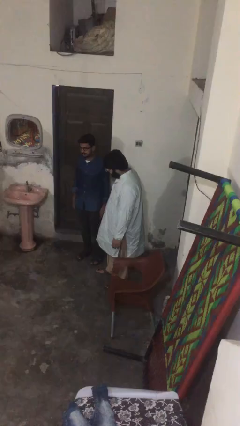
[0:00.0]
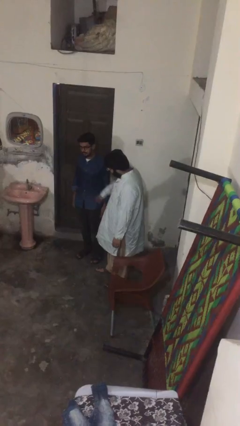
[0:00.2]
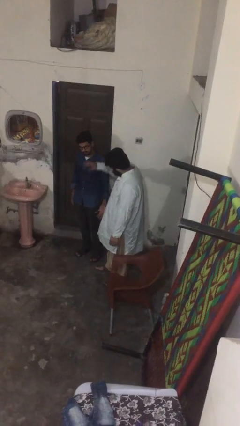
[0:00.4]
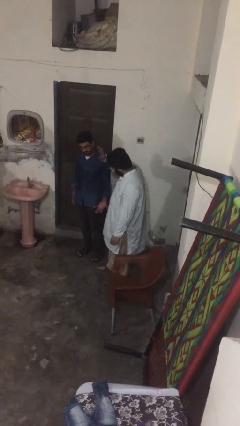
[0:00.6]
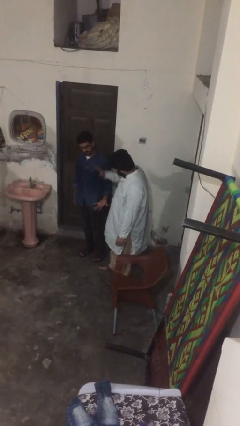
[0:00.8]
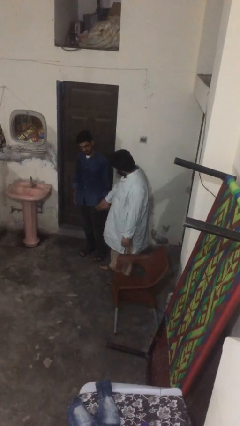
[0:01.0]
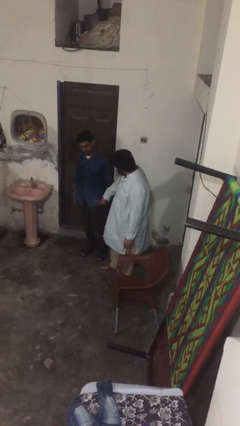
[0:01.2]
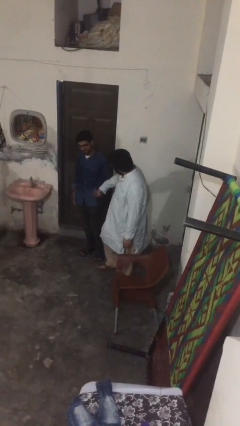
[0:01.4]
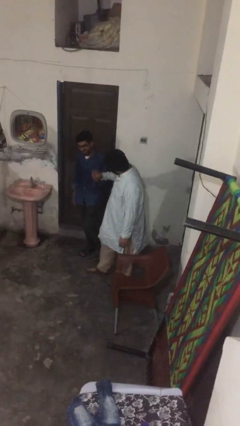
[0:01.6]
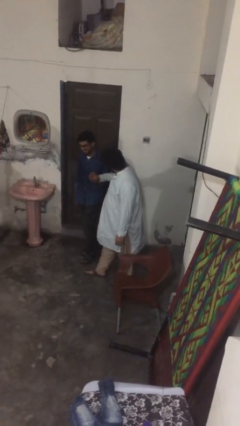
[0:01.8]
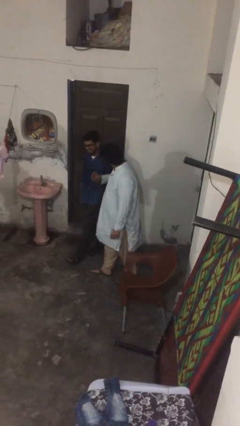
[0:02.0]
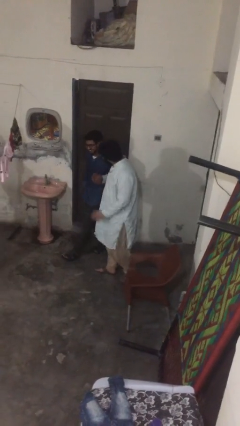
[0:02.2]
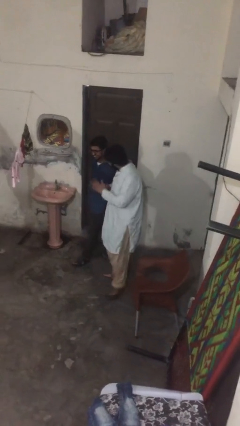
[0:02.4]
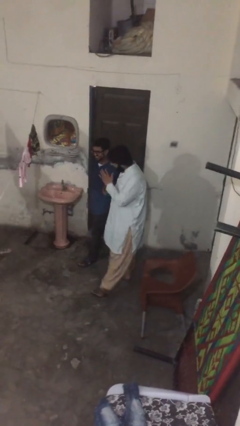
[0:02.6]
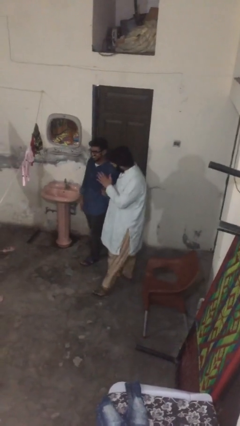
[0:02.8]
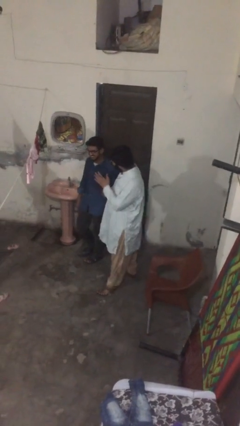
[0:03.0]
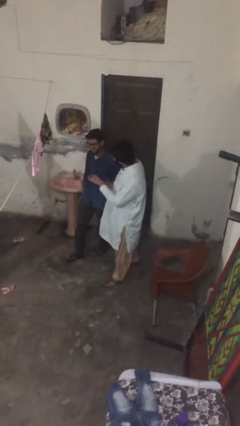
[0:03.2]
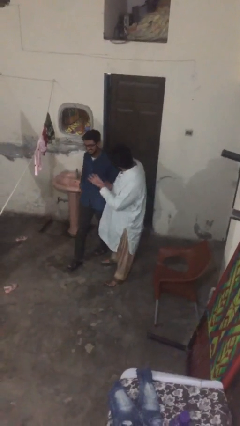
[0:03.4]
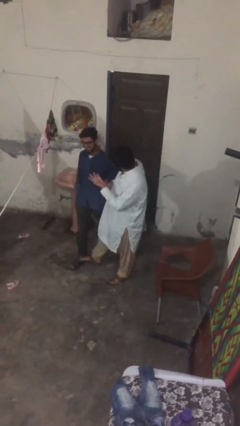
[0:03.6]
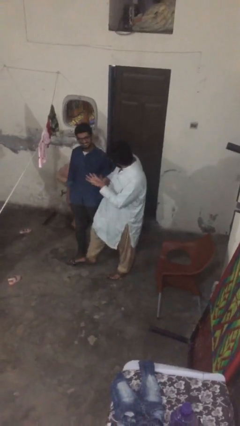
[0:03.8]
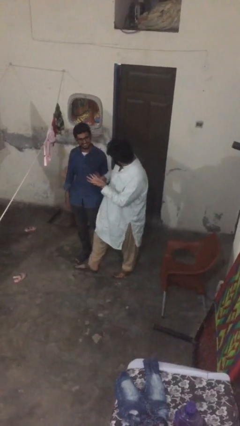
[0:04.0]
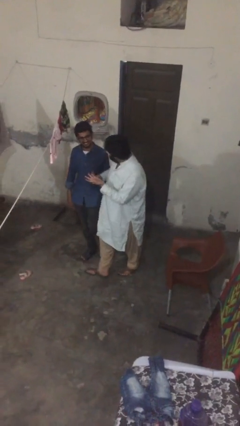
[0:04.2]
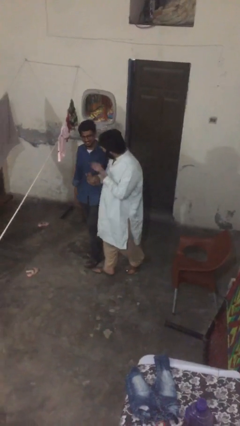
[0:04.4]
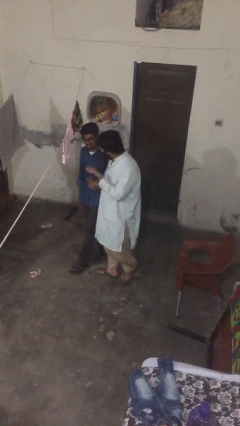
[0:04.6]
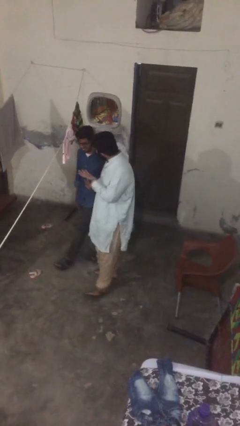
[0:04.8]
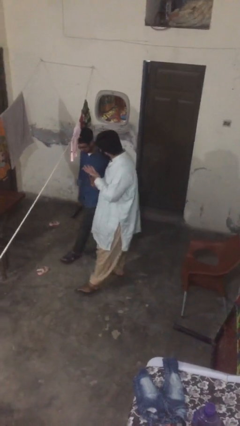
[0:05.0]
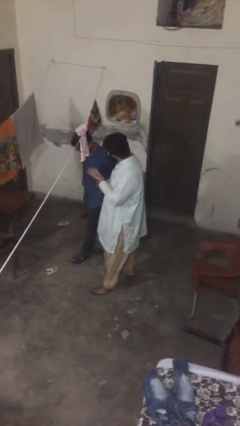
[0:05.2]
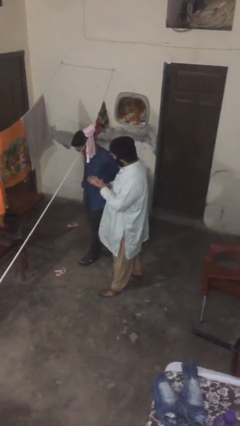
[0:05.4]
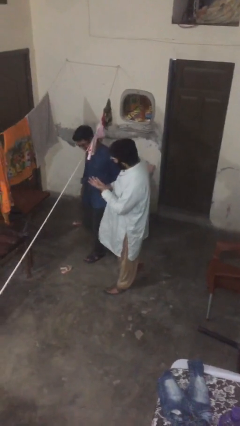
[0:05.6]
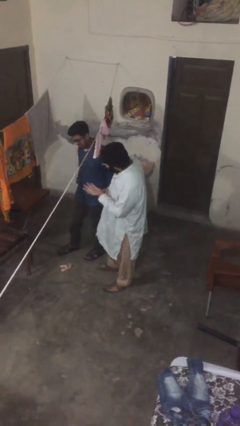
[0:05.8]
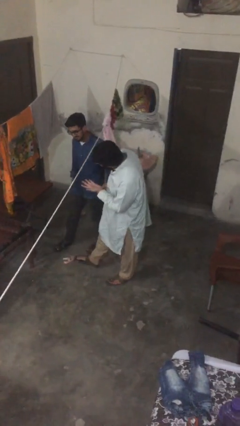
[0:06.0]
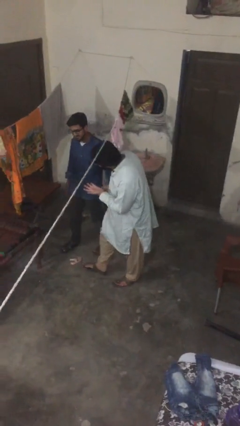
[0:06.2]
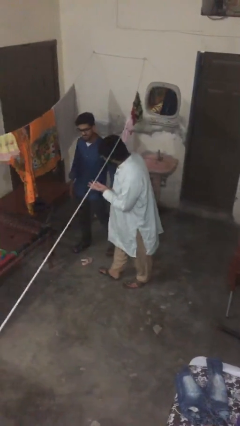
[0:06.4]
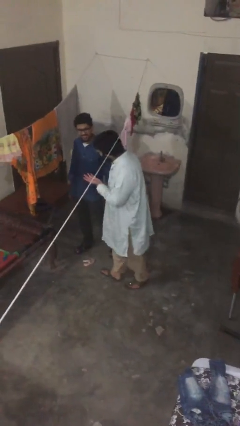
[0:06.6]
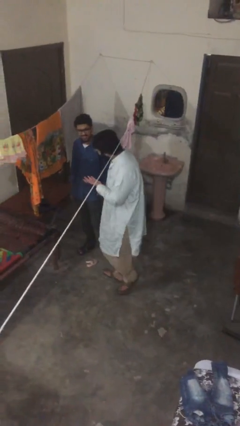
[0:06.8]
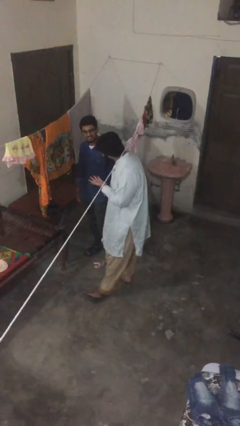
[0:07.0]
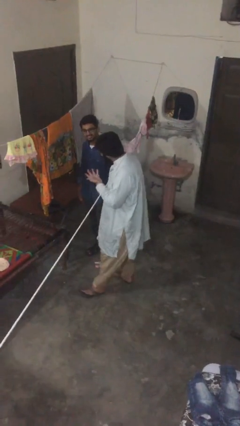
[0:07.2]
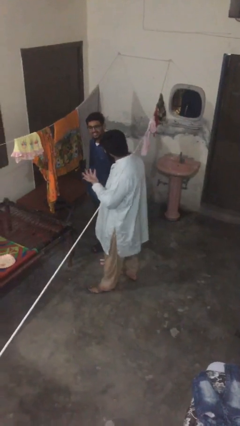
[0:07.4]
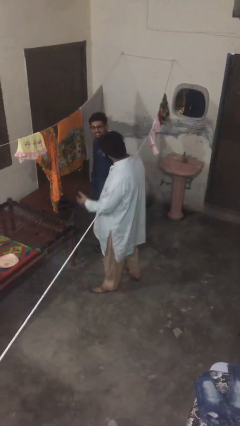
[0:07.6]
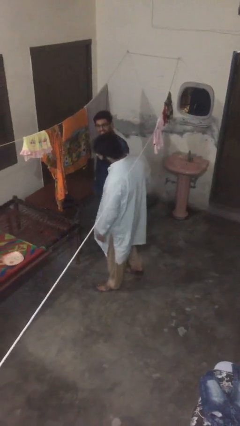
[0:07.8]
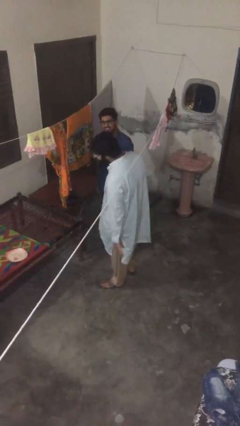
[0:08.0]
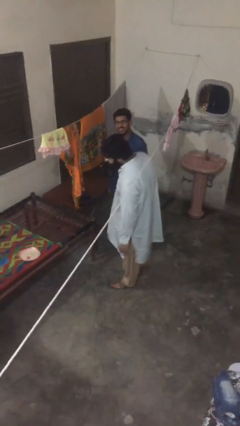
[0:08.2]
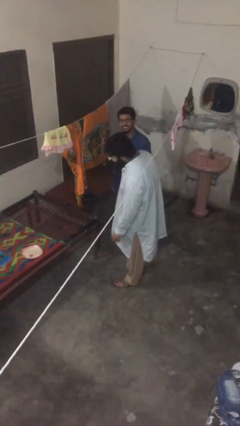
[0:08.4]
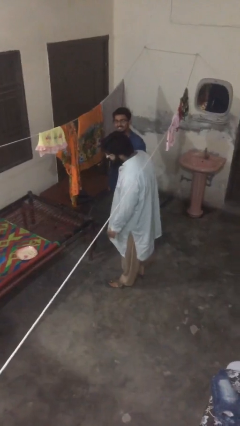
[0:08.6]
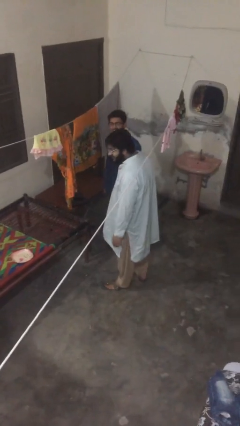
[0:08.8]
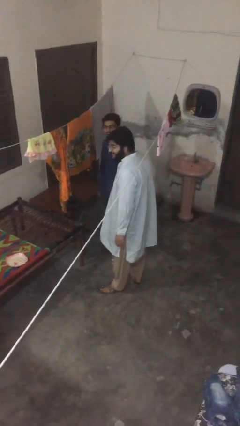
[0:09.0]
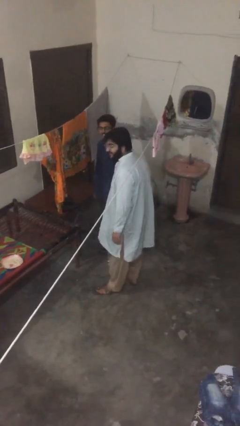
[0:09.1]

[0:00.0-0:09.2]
person holds hand

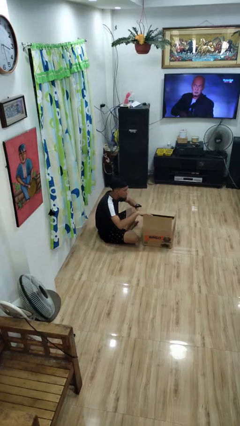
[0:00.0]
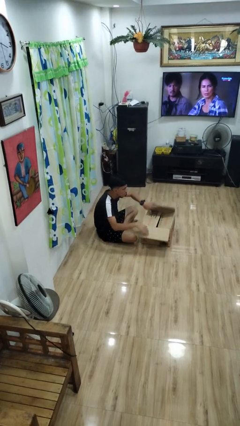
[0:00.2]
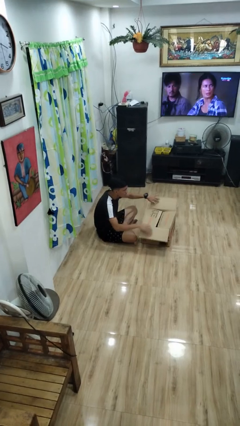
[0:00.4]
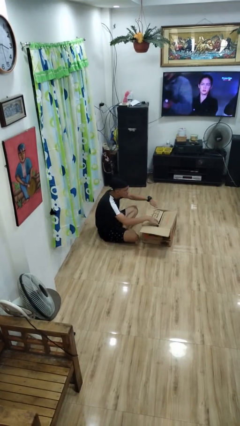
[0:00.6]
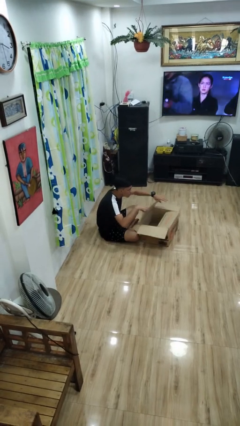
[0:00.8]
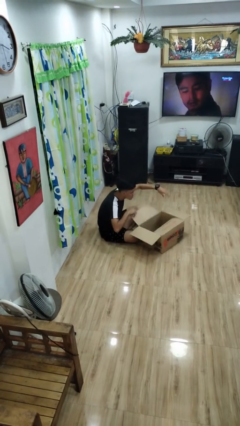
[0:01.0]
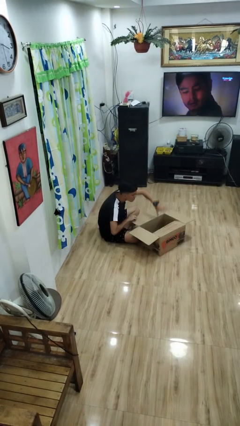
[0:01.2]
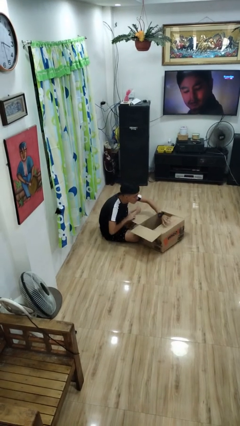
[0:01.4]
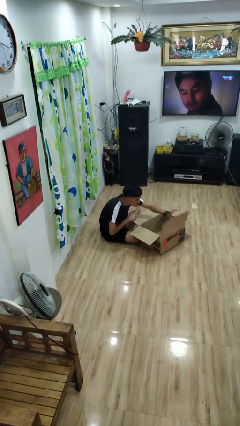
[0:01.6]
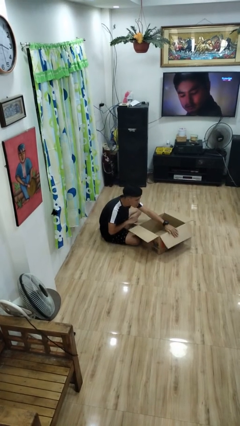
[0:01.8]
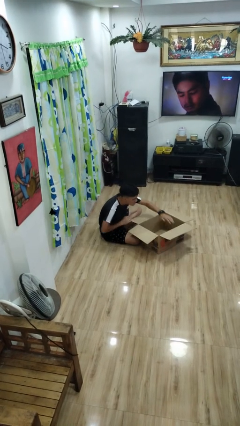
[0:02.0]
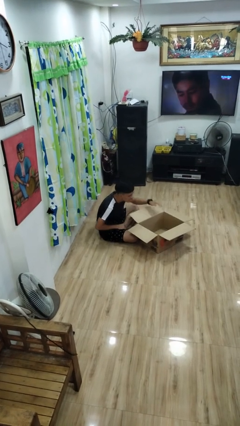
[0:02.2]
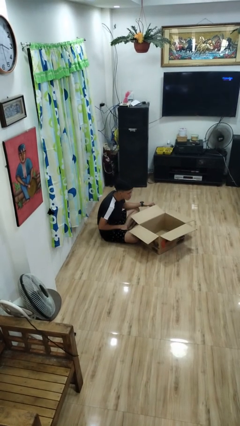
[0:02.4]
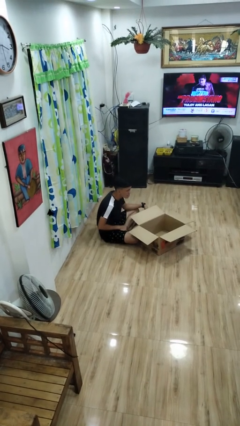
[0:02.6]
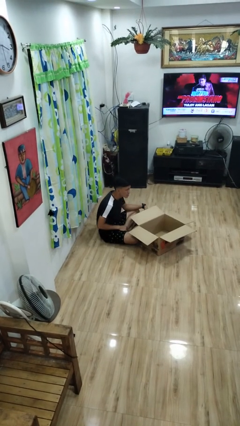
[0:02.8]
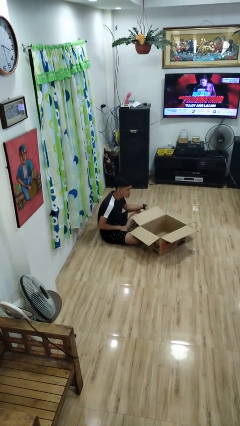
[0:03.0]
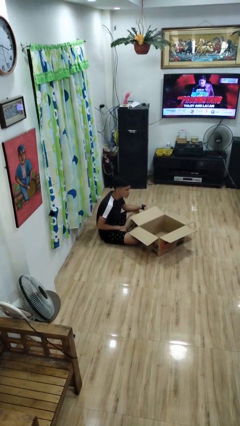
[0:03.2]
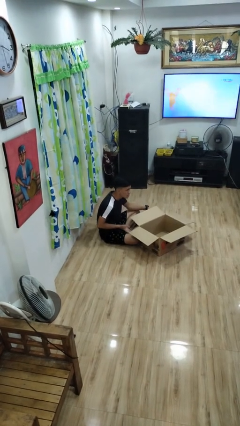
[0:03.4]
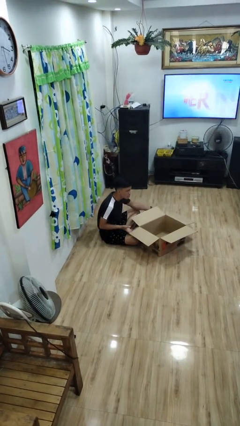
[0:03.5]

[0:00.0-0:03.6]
person opens box

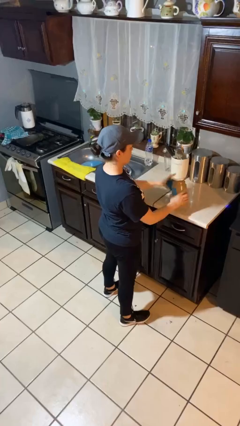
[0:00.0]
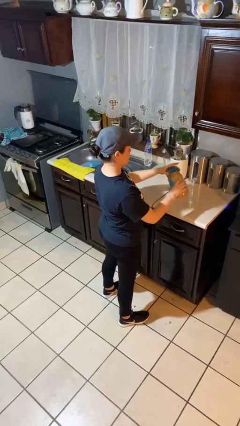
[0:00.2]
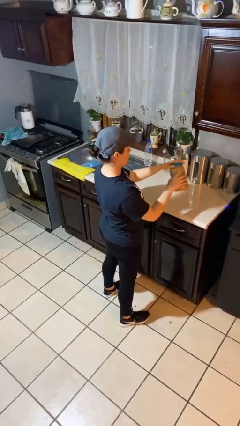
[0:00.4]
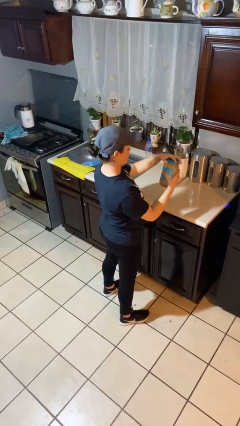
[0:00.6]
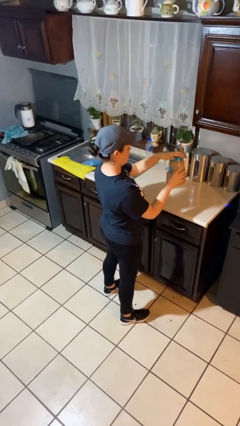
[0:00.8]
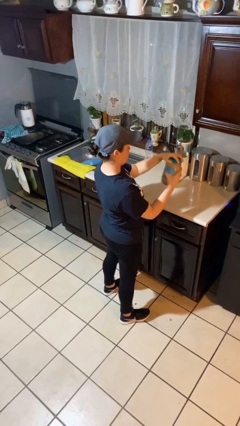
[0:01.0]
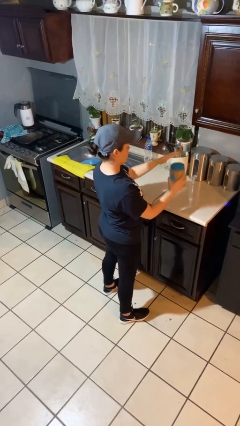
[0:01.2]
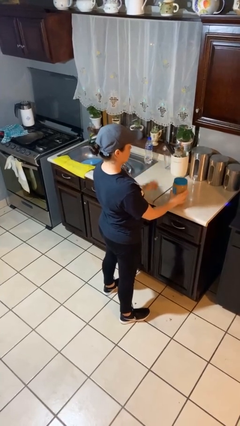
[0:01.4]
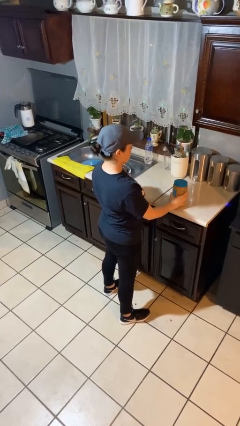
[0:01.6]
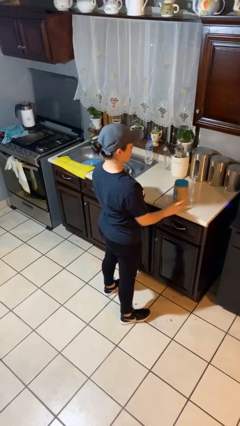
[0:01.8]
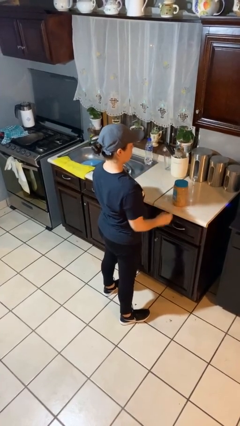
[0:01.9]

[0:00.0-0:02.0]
person closes jar

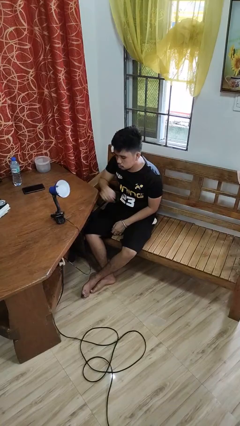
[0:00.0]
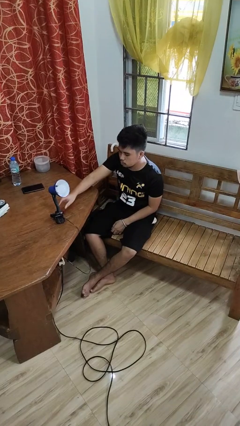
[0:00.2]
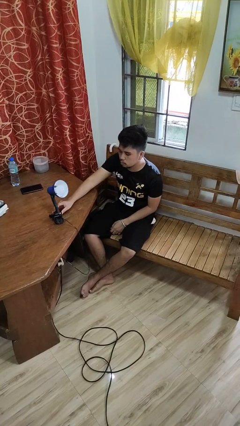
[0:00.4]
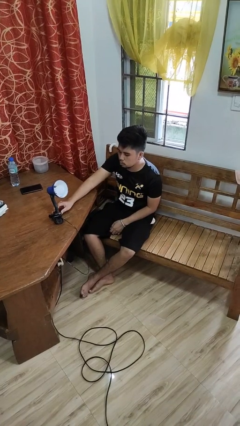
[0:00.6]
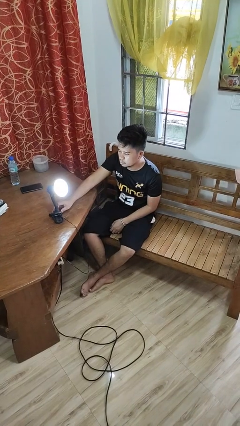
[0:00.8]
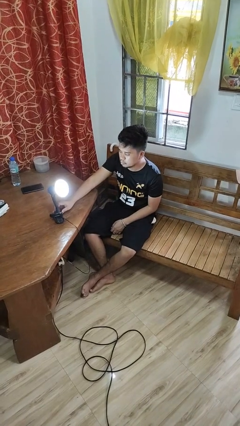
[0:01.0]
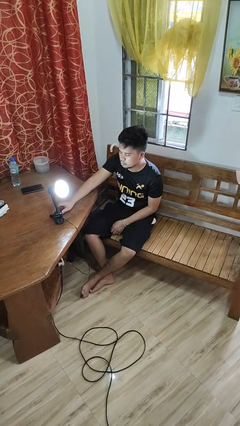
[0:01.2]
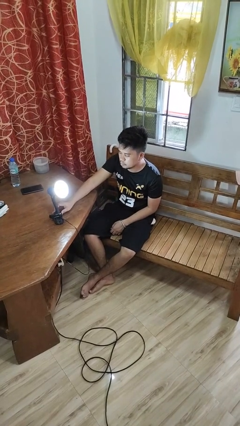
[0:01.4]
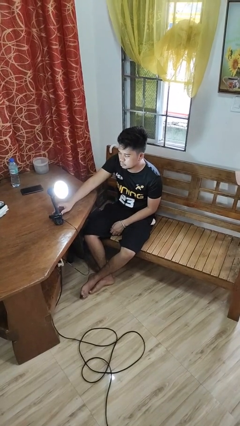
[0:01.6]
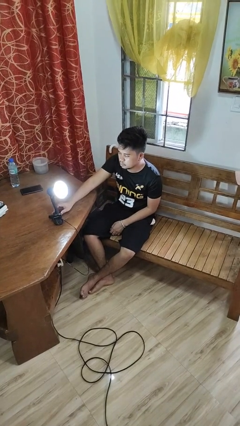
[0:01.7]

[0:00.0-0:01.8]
person turns on lamp

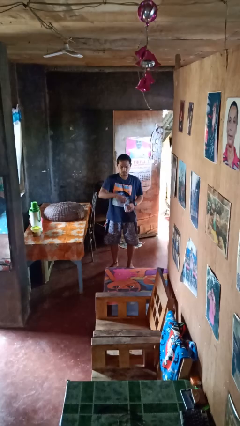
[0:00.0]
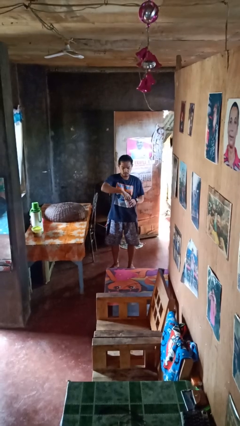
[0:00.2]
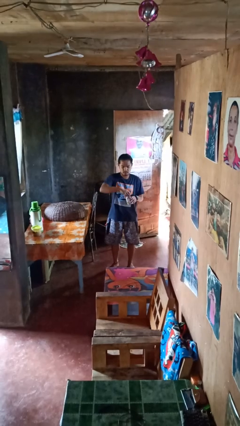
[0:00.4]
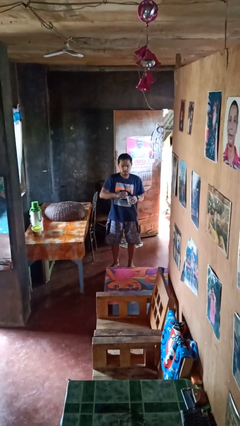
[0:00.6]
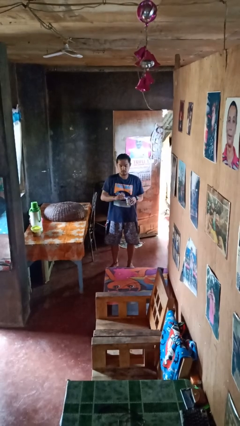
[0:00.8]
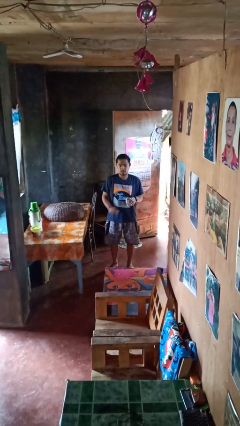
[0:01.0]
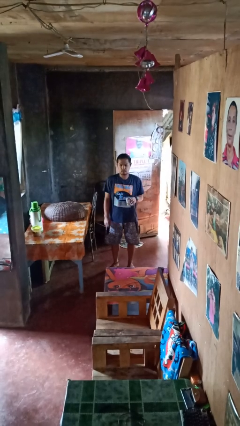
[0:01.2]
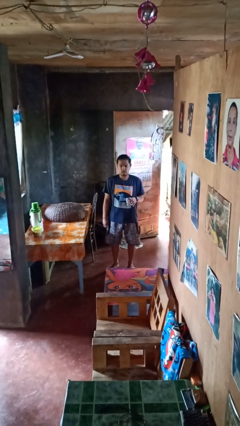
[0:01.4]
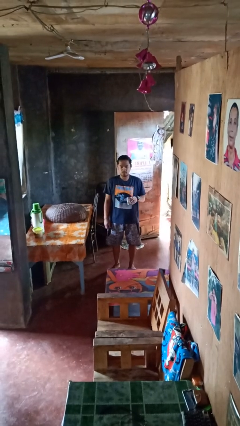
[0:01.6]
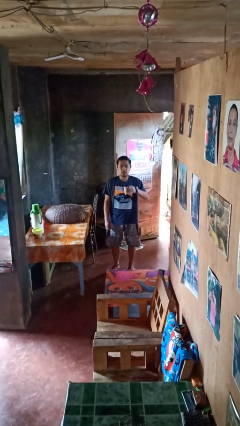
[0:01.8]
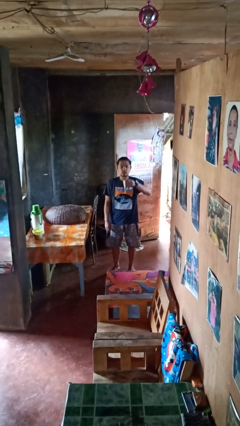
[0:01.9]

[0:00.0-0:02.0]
person opens beverage can
